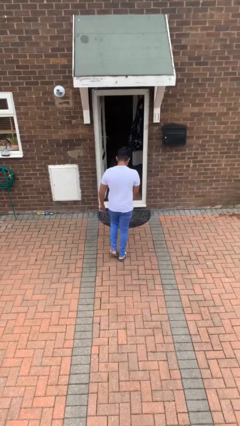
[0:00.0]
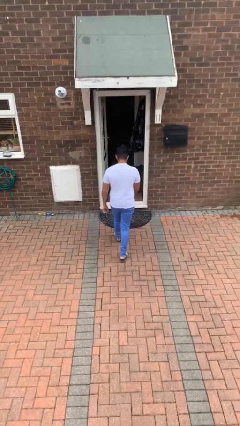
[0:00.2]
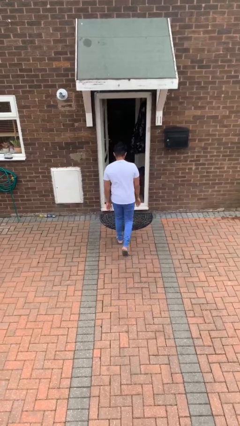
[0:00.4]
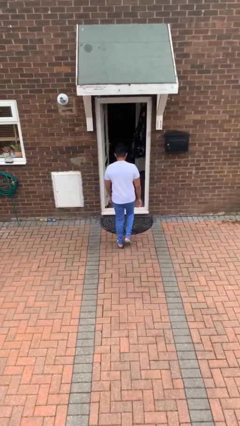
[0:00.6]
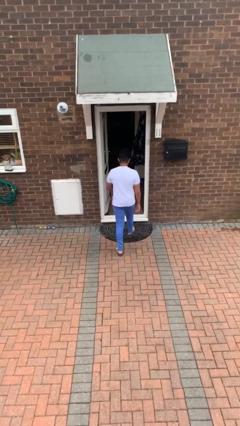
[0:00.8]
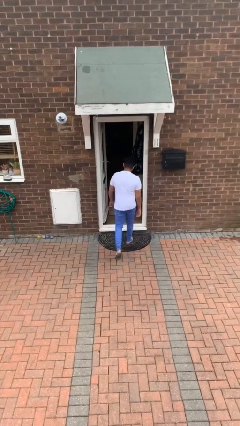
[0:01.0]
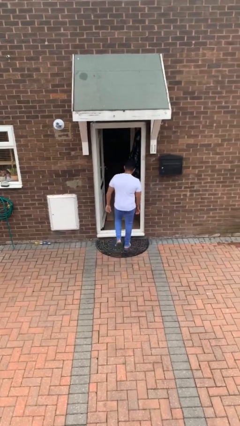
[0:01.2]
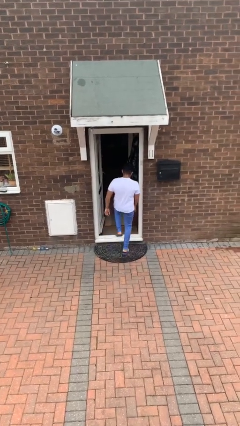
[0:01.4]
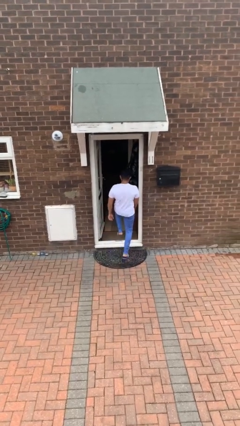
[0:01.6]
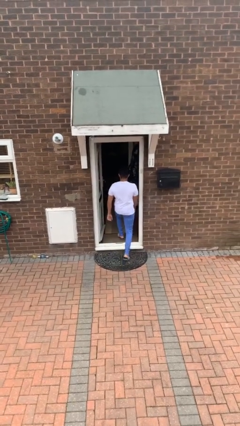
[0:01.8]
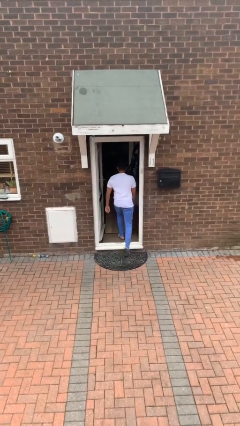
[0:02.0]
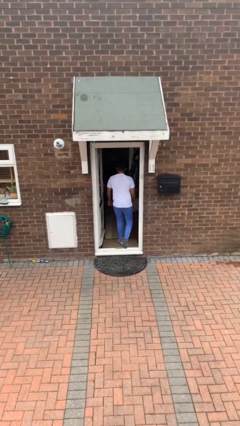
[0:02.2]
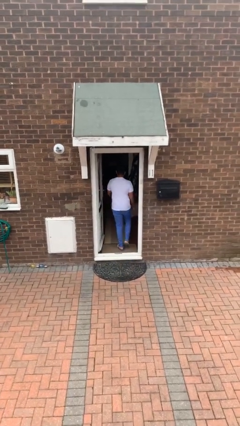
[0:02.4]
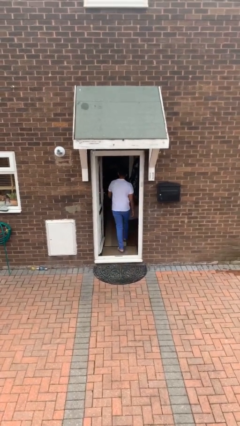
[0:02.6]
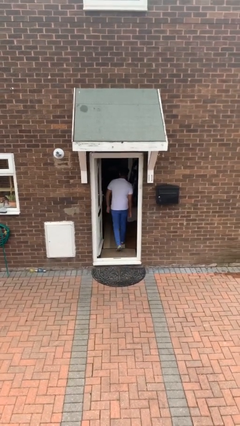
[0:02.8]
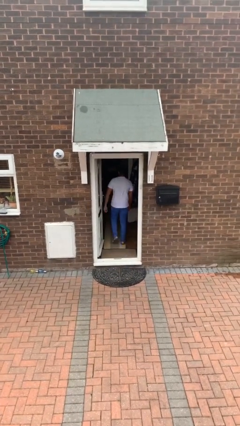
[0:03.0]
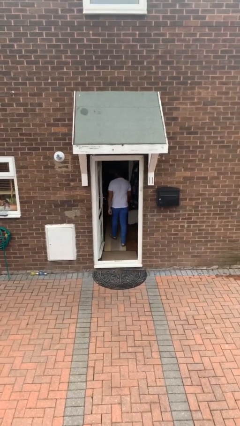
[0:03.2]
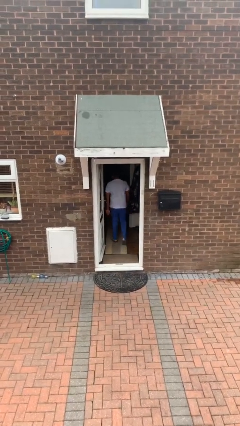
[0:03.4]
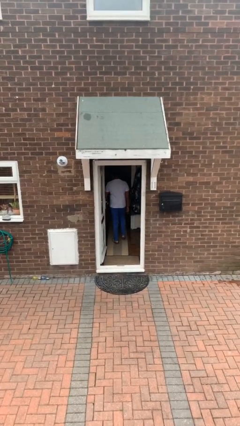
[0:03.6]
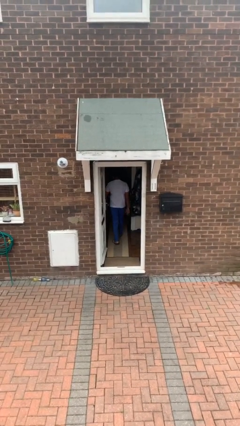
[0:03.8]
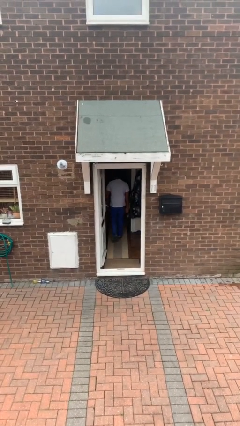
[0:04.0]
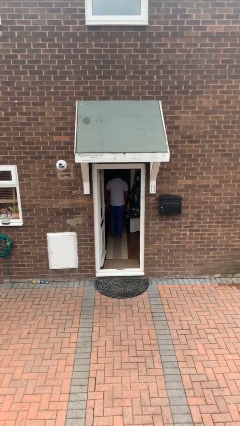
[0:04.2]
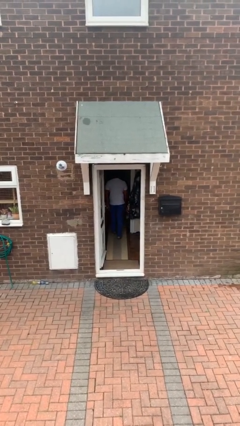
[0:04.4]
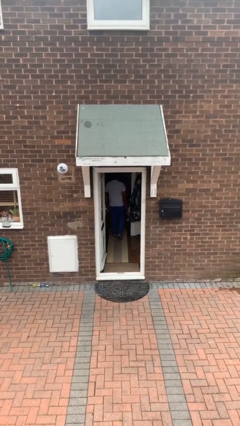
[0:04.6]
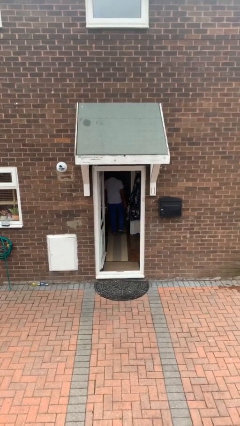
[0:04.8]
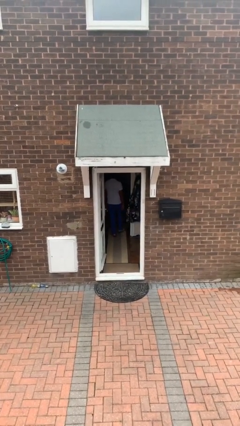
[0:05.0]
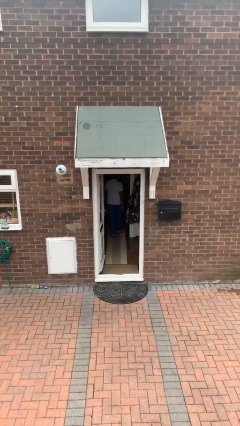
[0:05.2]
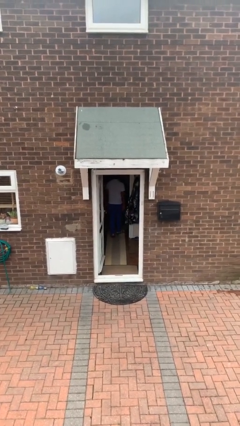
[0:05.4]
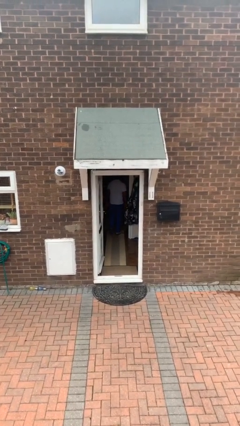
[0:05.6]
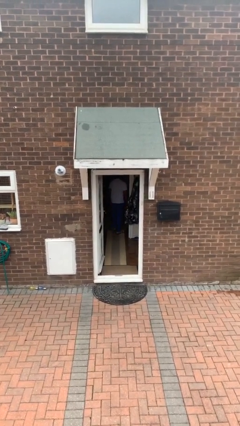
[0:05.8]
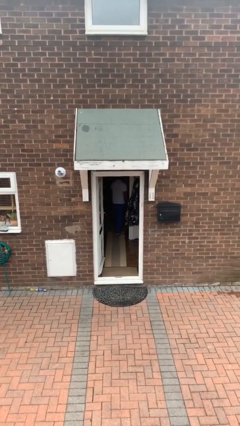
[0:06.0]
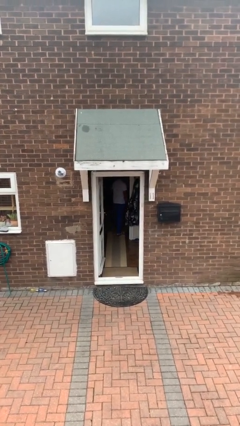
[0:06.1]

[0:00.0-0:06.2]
person exits scene through structure

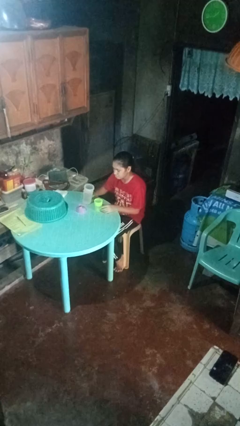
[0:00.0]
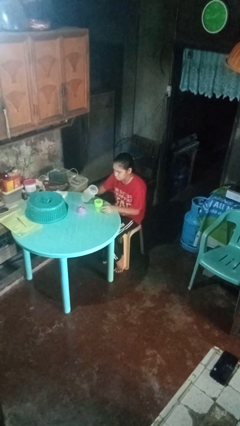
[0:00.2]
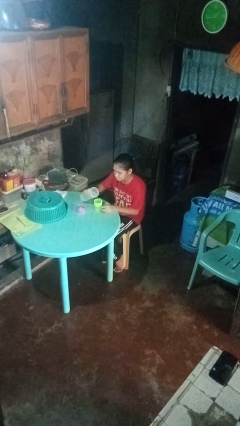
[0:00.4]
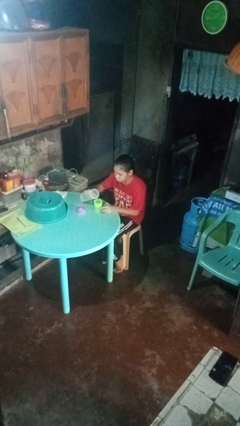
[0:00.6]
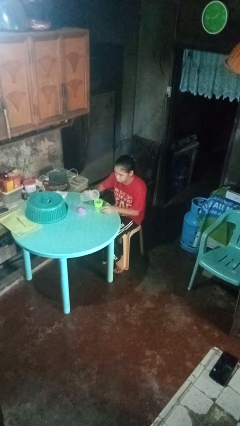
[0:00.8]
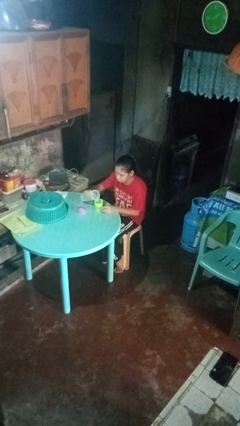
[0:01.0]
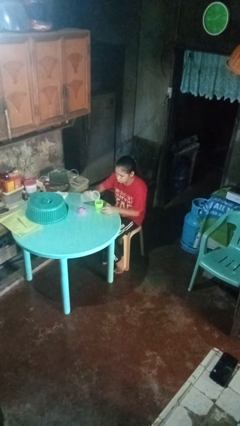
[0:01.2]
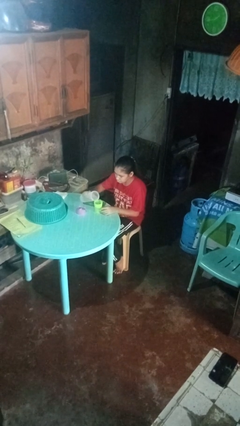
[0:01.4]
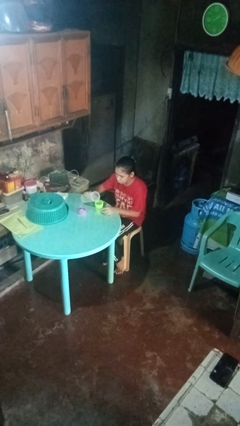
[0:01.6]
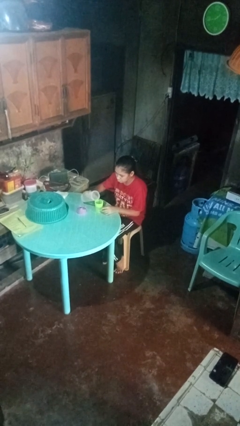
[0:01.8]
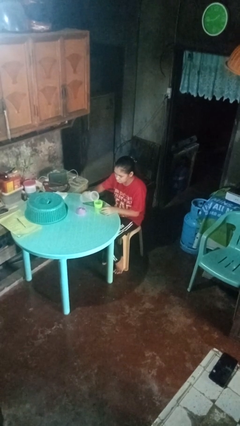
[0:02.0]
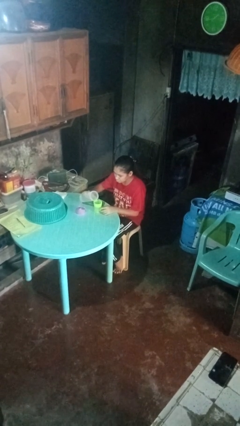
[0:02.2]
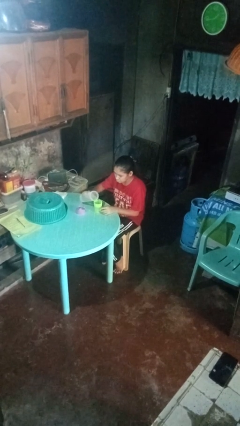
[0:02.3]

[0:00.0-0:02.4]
person pours liquid into cup

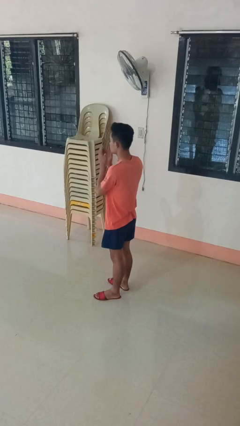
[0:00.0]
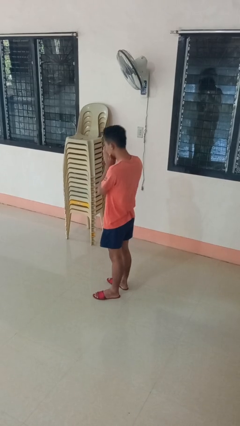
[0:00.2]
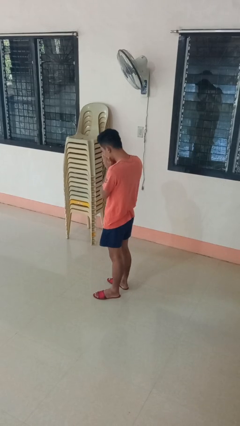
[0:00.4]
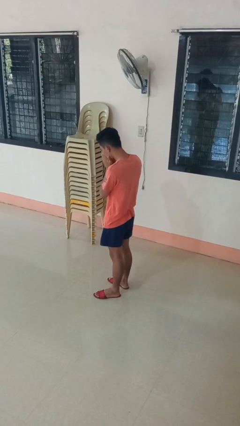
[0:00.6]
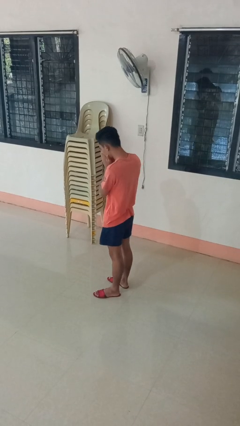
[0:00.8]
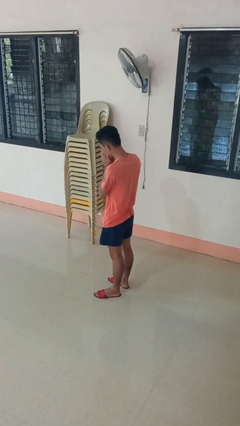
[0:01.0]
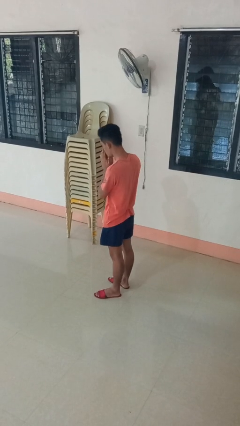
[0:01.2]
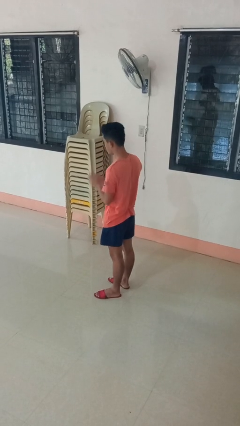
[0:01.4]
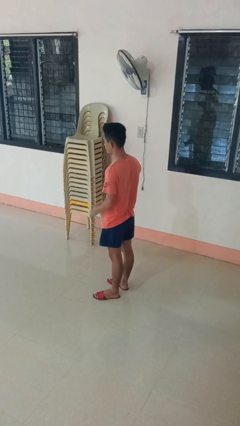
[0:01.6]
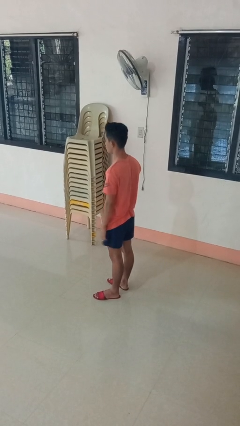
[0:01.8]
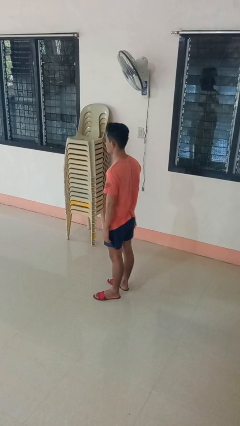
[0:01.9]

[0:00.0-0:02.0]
person sneezes into hand

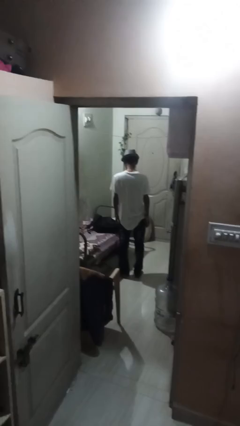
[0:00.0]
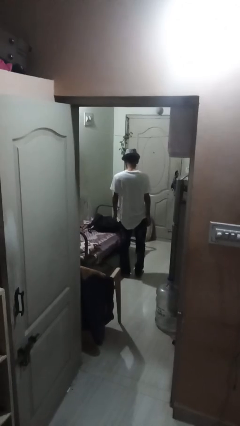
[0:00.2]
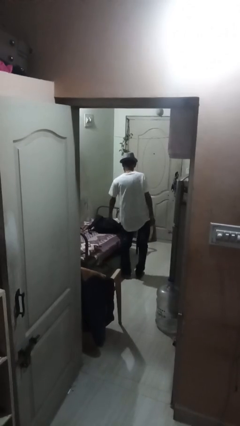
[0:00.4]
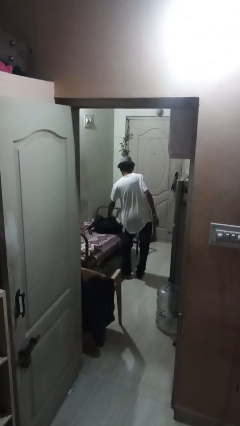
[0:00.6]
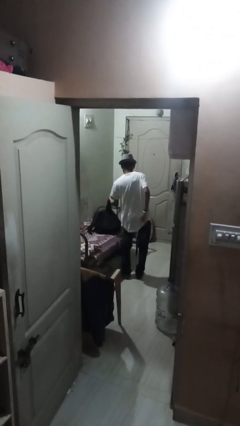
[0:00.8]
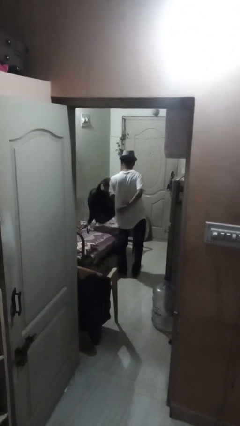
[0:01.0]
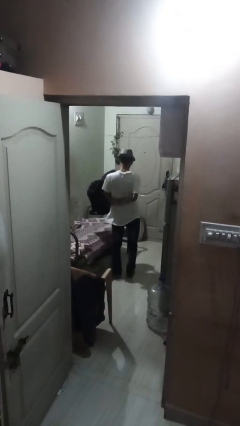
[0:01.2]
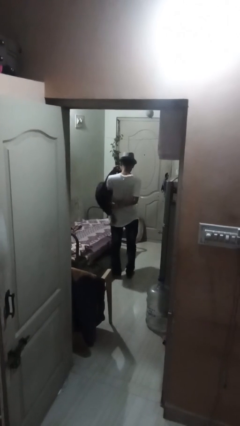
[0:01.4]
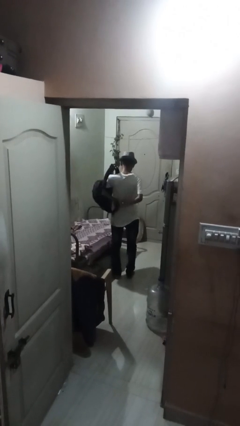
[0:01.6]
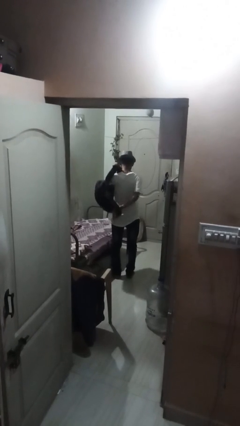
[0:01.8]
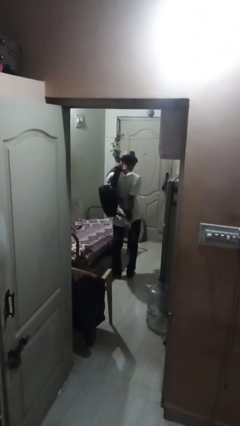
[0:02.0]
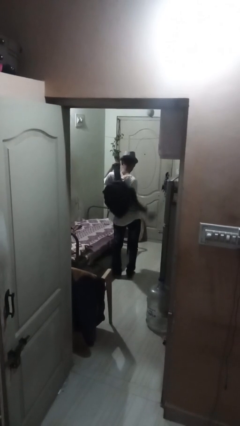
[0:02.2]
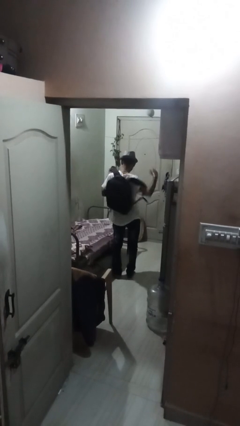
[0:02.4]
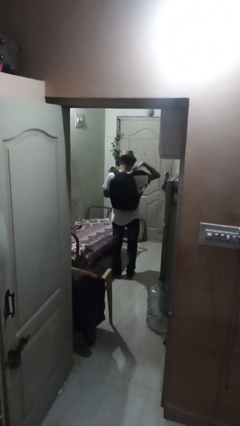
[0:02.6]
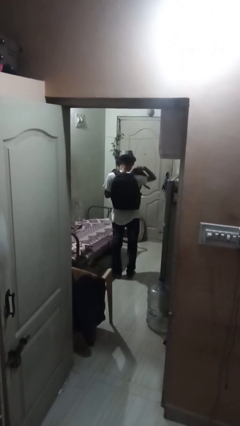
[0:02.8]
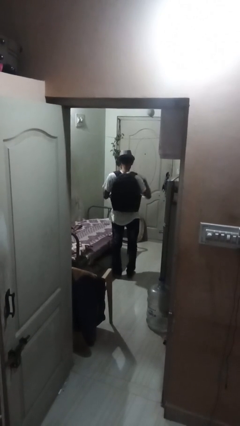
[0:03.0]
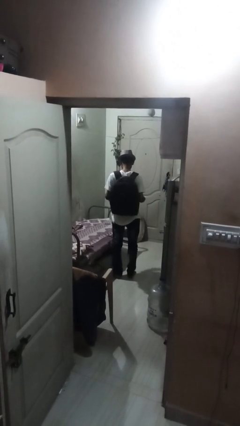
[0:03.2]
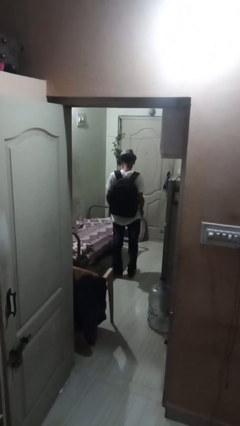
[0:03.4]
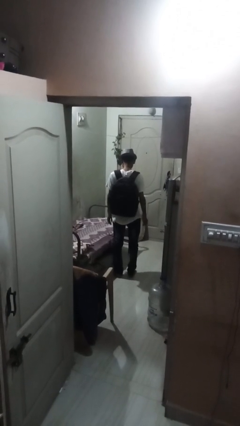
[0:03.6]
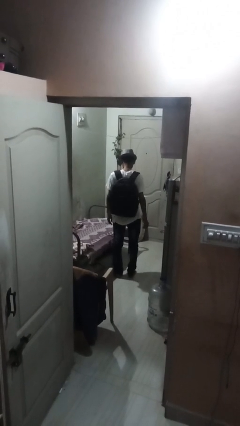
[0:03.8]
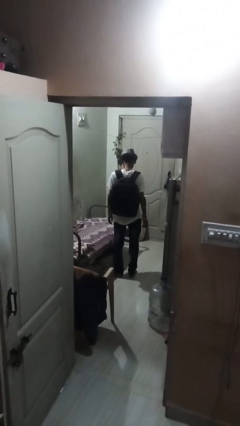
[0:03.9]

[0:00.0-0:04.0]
person puts on backpack

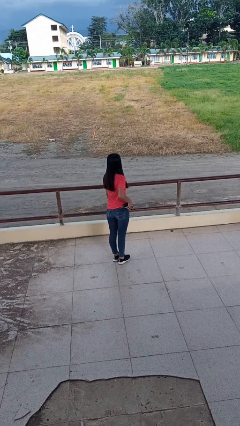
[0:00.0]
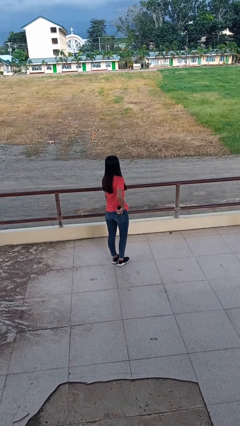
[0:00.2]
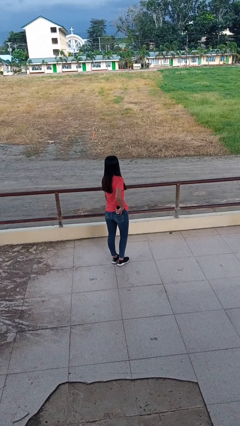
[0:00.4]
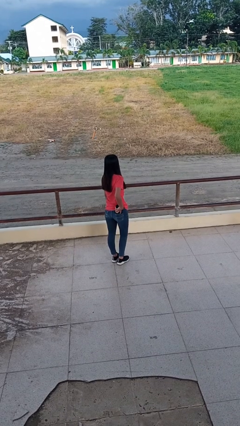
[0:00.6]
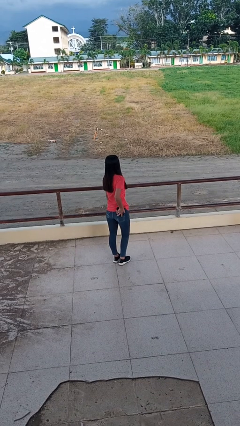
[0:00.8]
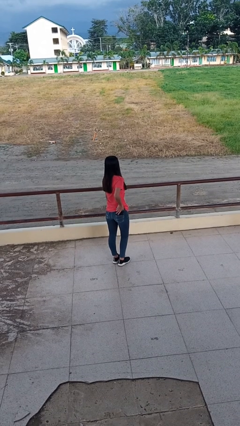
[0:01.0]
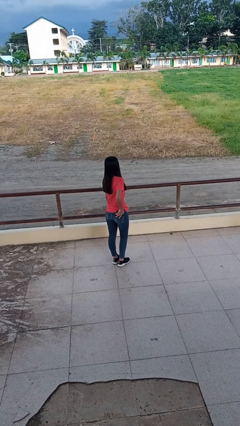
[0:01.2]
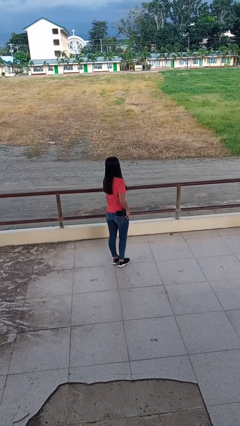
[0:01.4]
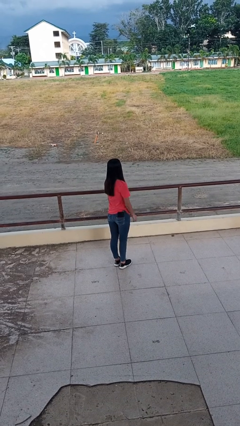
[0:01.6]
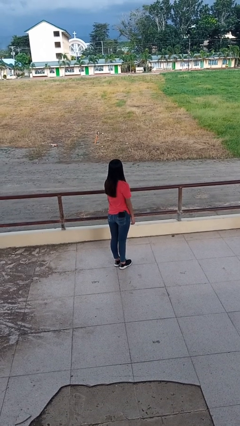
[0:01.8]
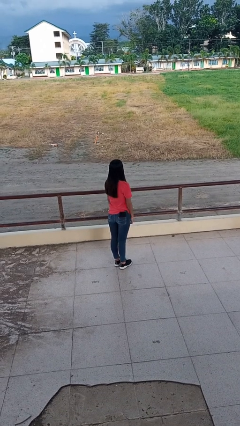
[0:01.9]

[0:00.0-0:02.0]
person puts phone into pocket

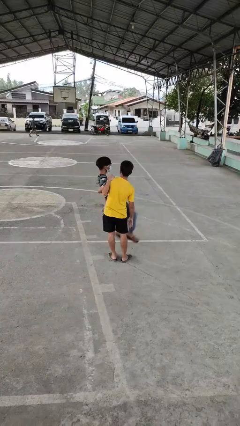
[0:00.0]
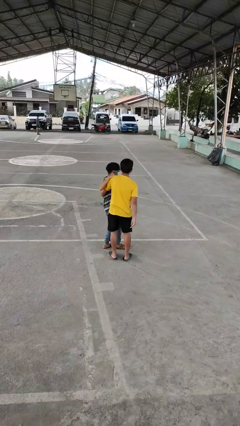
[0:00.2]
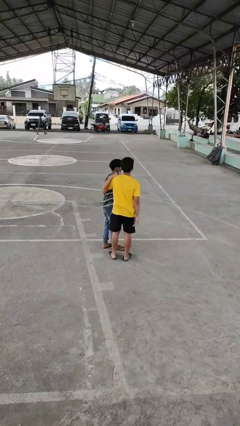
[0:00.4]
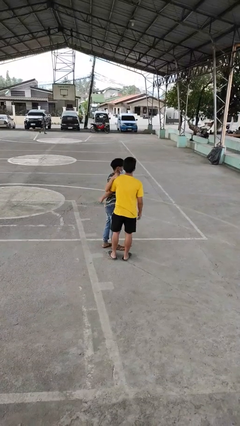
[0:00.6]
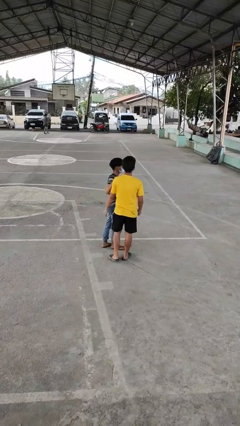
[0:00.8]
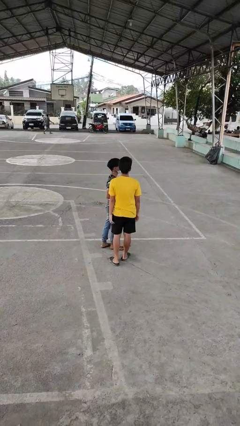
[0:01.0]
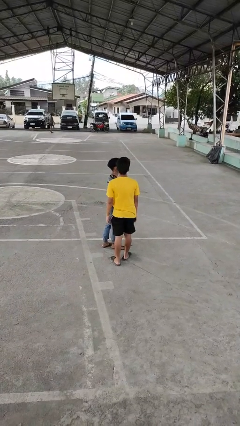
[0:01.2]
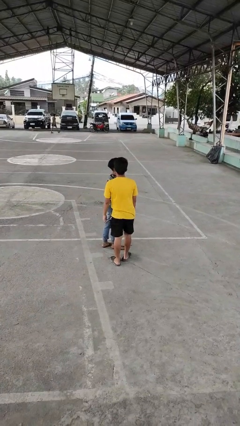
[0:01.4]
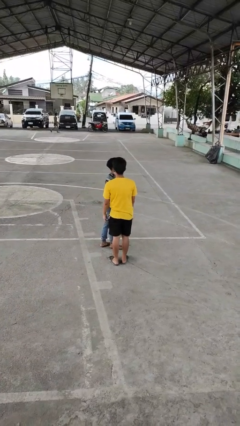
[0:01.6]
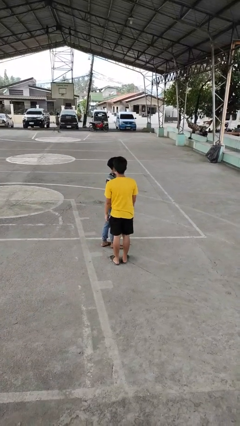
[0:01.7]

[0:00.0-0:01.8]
person puts down person
